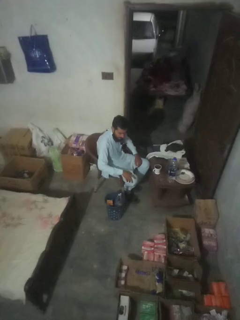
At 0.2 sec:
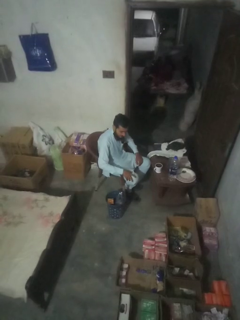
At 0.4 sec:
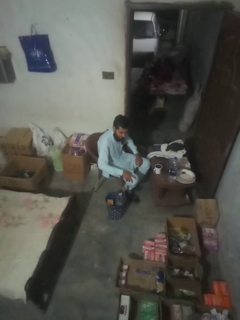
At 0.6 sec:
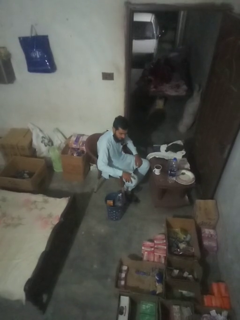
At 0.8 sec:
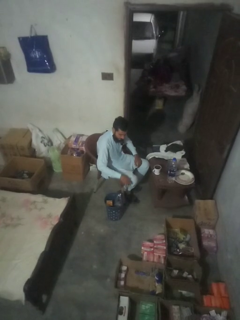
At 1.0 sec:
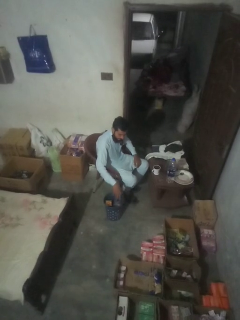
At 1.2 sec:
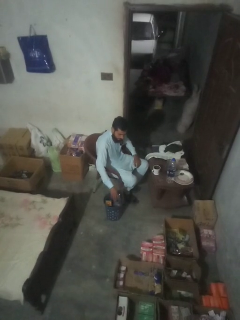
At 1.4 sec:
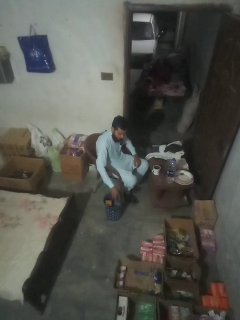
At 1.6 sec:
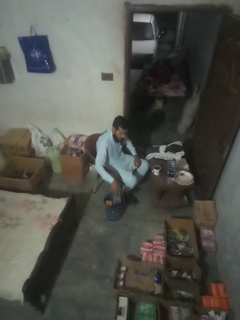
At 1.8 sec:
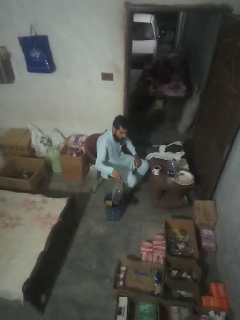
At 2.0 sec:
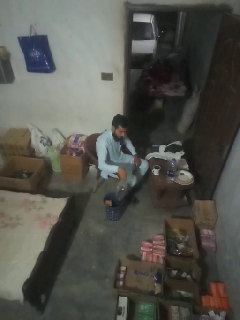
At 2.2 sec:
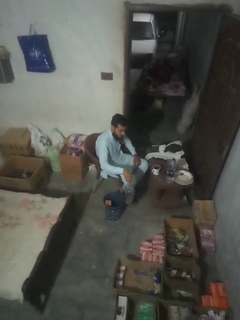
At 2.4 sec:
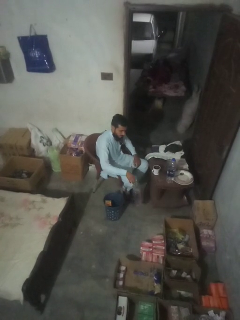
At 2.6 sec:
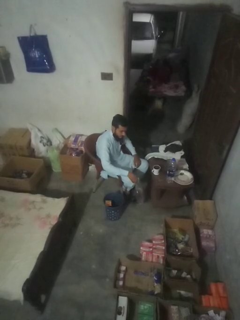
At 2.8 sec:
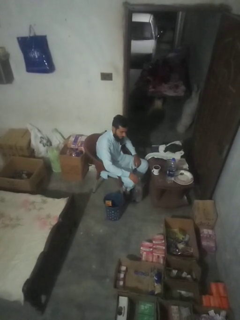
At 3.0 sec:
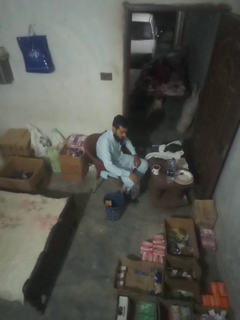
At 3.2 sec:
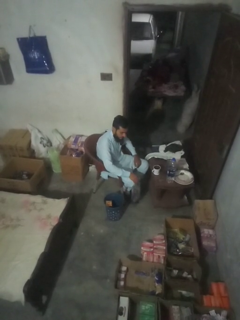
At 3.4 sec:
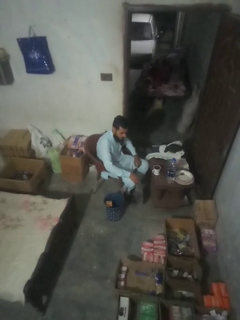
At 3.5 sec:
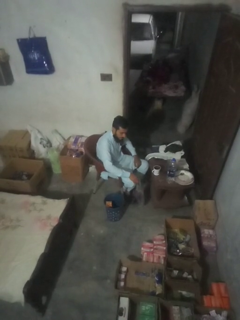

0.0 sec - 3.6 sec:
person inserts trashbag into trashcan

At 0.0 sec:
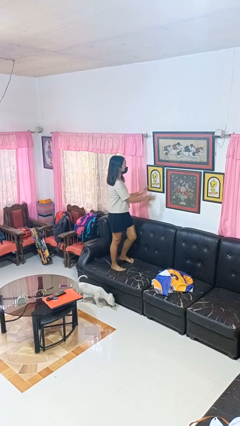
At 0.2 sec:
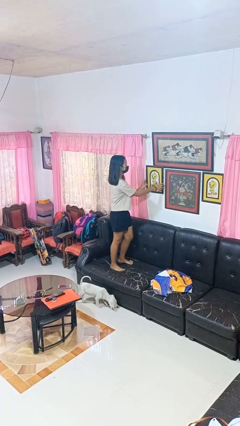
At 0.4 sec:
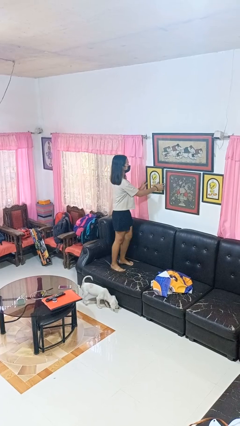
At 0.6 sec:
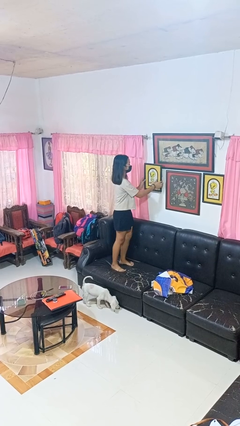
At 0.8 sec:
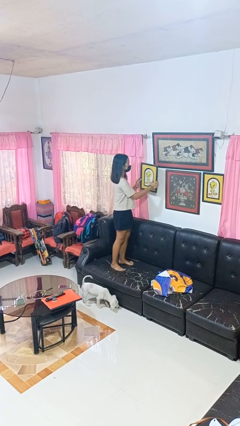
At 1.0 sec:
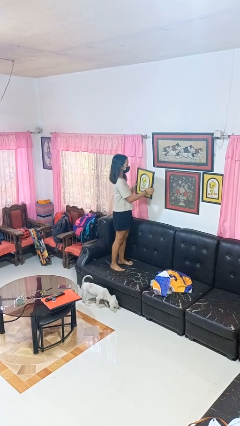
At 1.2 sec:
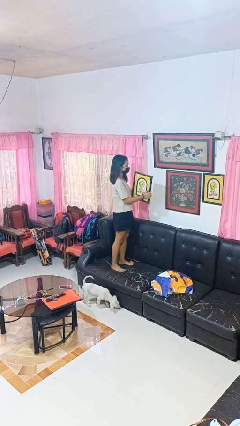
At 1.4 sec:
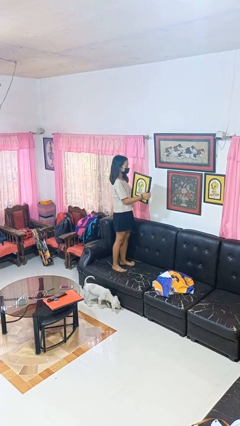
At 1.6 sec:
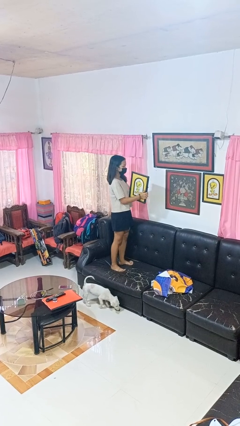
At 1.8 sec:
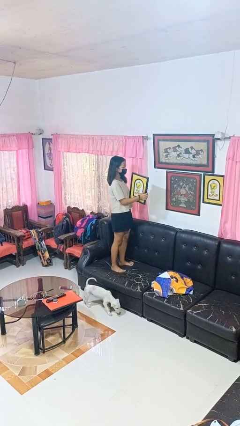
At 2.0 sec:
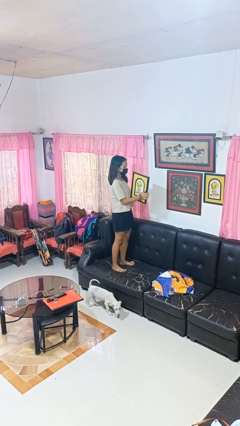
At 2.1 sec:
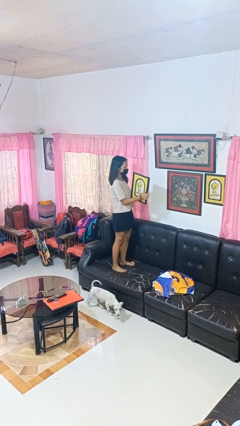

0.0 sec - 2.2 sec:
person takes down picture frame

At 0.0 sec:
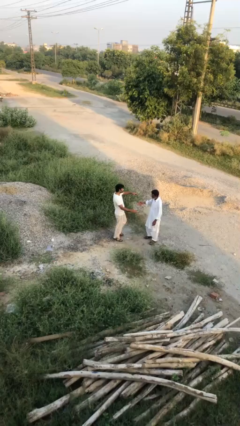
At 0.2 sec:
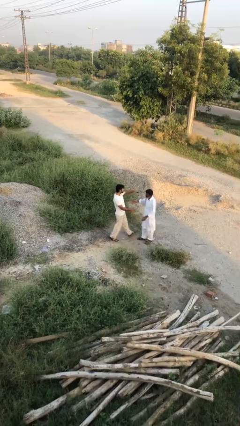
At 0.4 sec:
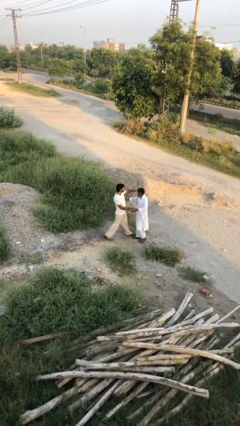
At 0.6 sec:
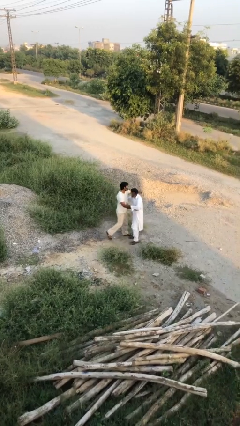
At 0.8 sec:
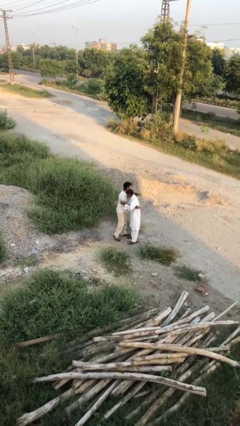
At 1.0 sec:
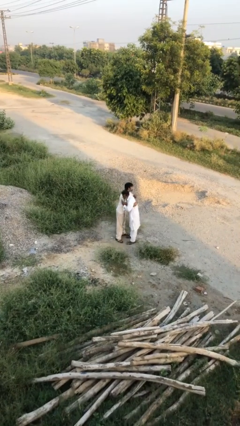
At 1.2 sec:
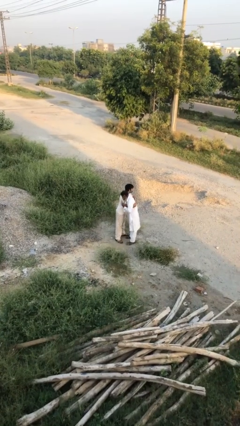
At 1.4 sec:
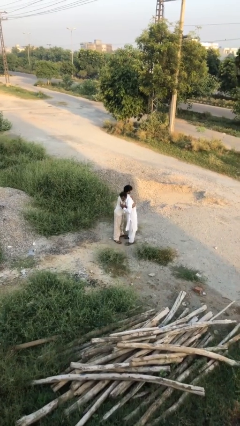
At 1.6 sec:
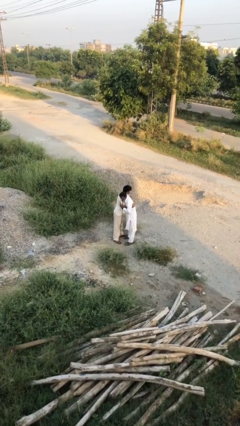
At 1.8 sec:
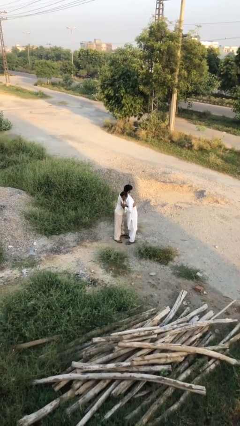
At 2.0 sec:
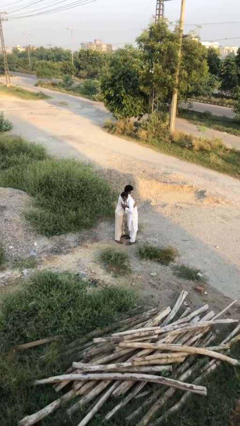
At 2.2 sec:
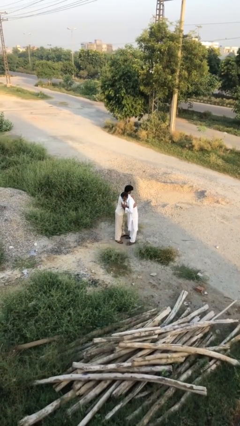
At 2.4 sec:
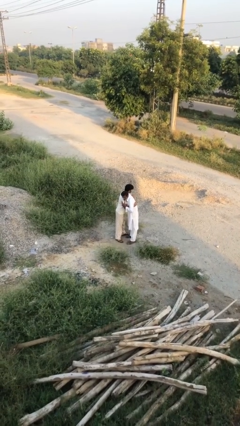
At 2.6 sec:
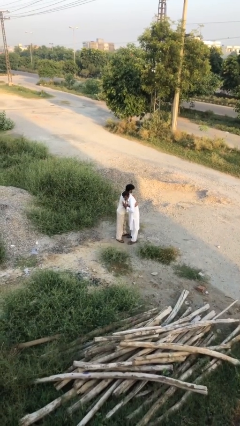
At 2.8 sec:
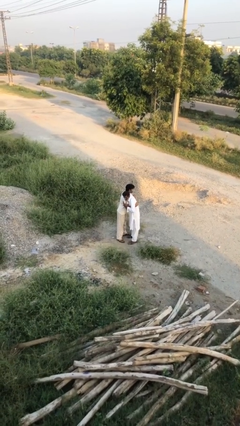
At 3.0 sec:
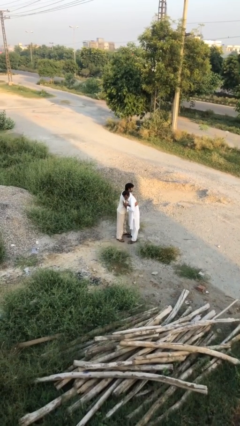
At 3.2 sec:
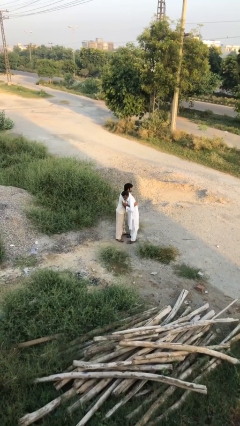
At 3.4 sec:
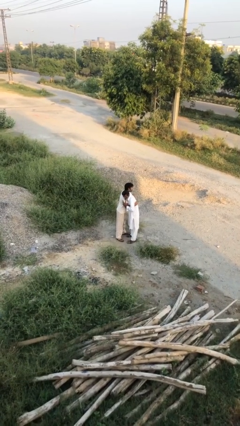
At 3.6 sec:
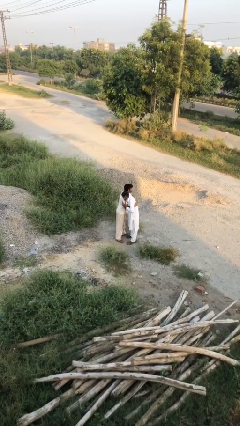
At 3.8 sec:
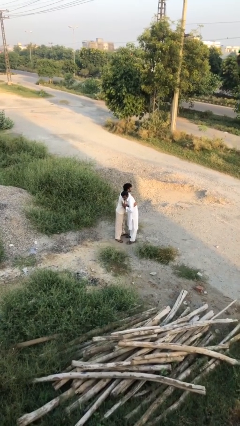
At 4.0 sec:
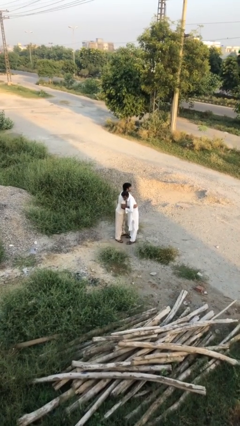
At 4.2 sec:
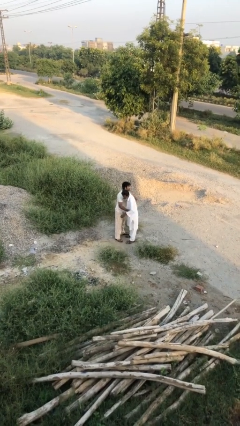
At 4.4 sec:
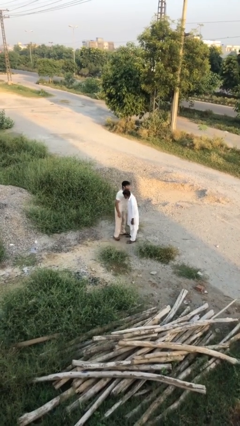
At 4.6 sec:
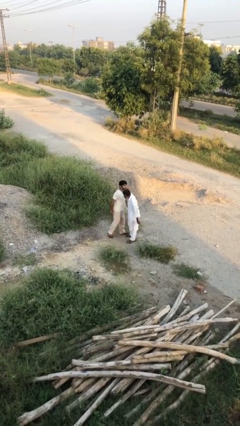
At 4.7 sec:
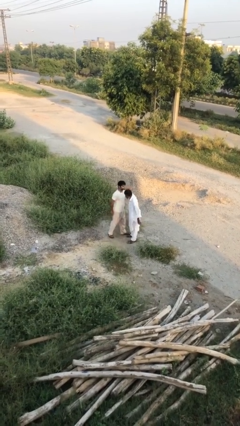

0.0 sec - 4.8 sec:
person embraces person

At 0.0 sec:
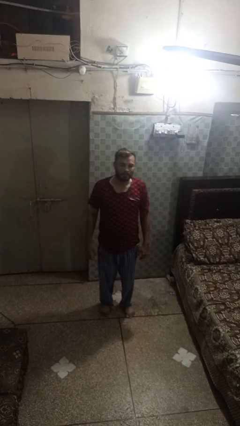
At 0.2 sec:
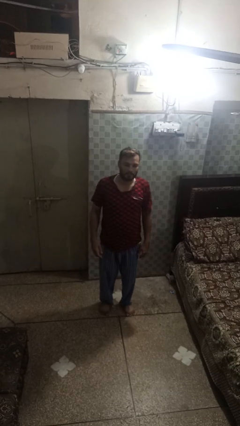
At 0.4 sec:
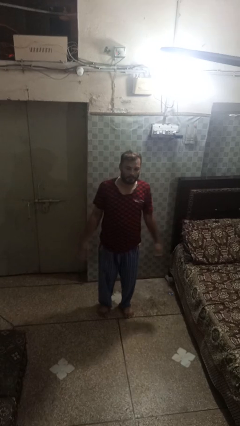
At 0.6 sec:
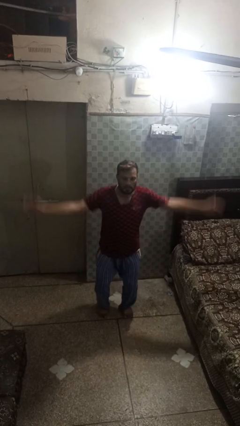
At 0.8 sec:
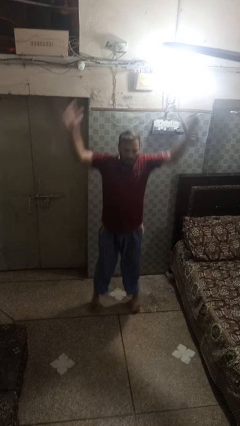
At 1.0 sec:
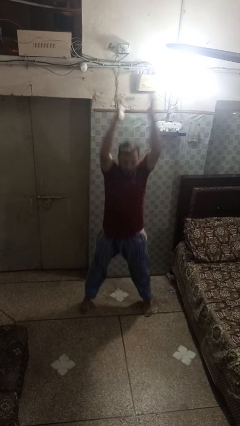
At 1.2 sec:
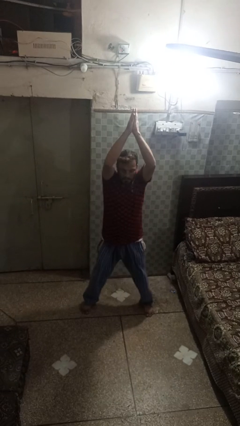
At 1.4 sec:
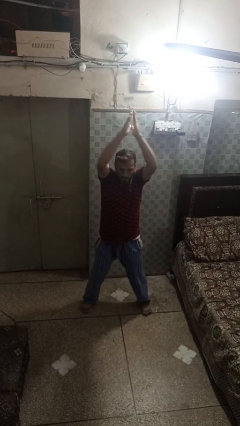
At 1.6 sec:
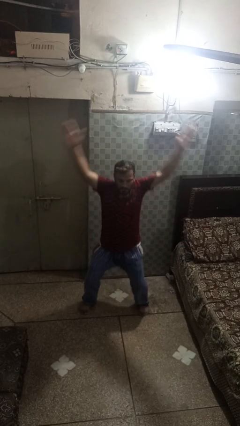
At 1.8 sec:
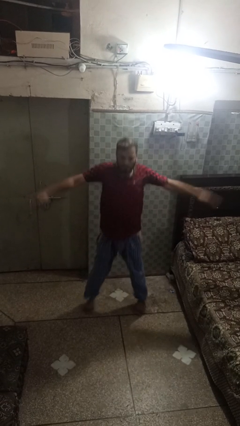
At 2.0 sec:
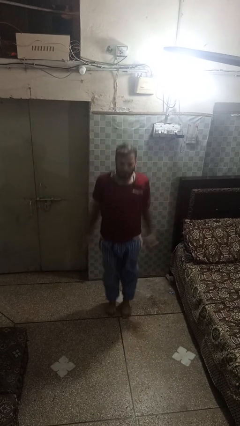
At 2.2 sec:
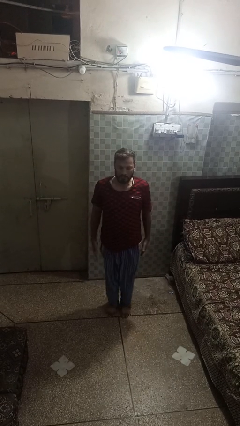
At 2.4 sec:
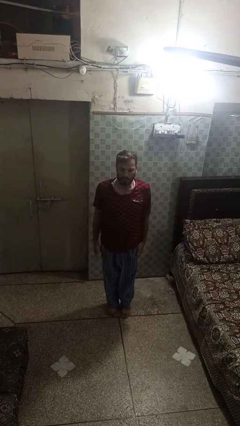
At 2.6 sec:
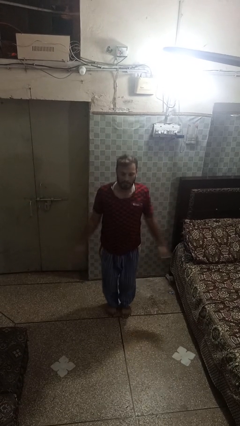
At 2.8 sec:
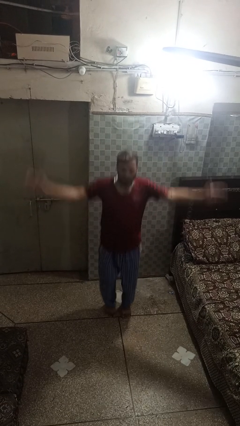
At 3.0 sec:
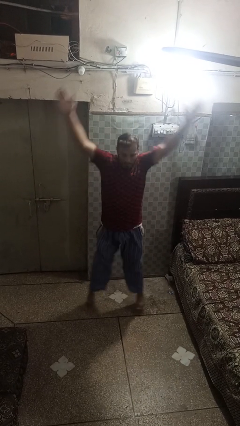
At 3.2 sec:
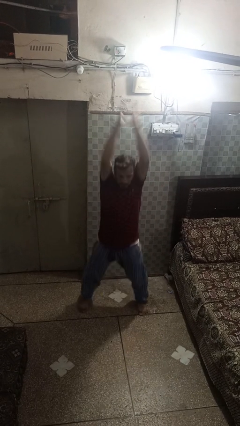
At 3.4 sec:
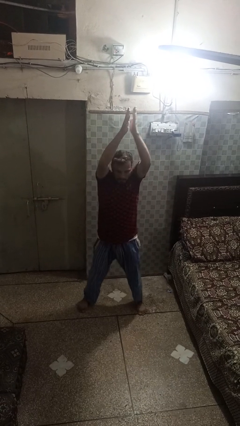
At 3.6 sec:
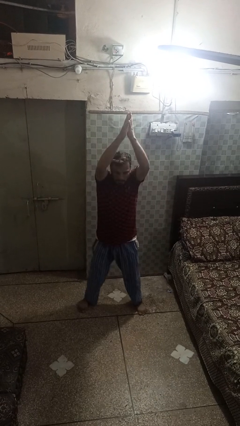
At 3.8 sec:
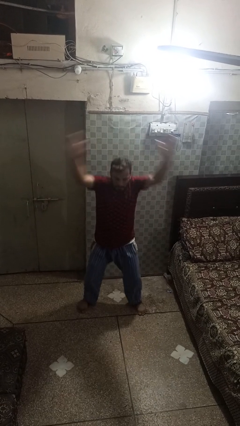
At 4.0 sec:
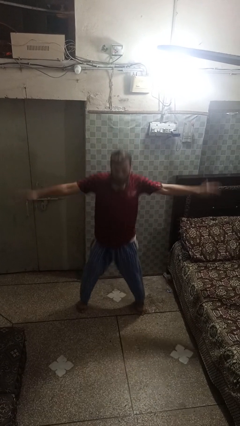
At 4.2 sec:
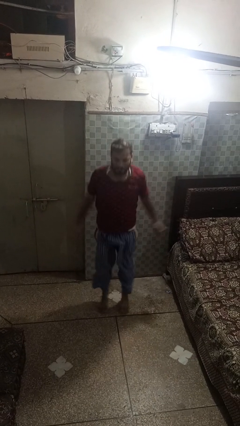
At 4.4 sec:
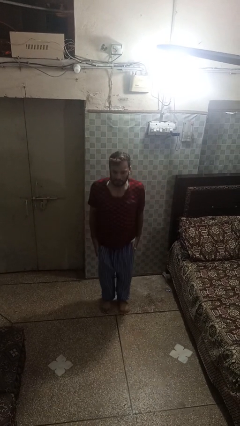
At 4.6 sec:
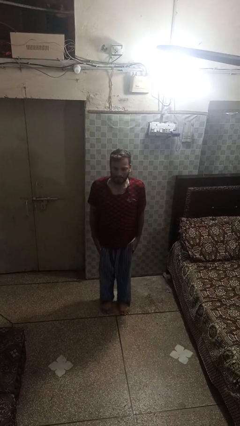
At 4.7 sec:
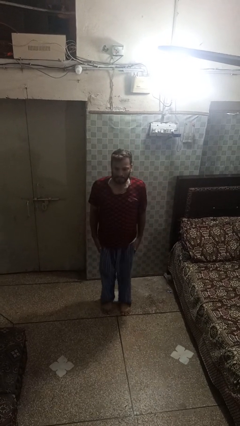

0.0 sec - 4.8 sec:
person exercises with jumping jacks

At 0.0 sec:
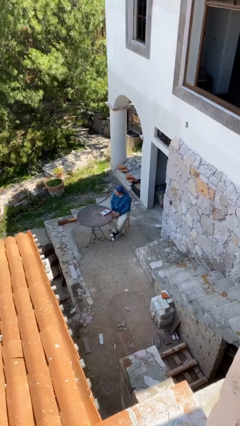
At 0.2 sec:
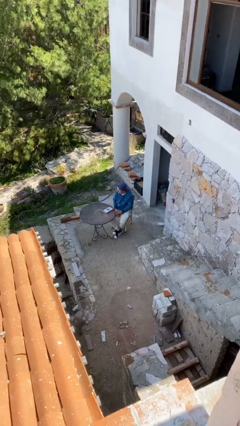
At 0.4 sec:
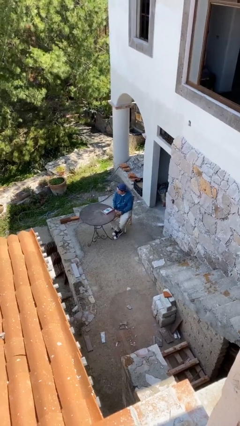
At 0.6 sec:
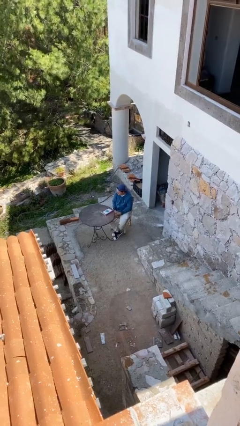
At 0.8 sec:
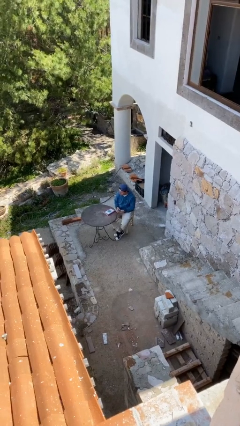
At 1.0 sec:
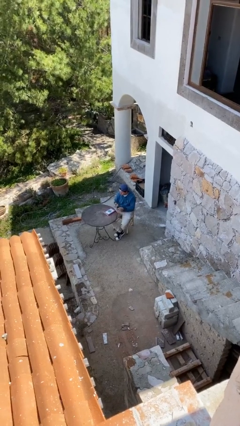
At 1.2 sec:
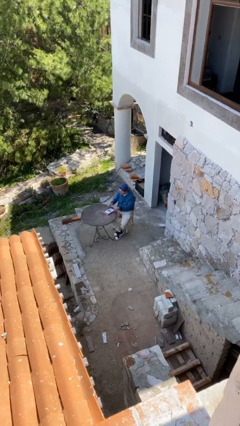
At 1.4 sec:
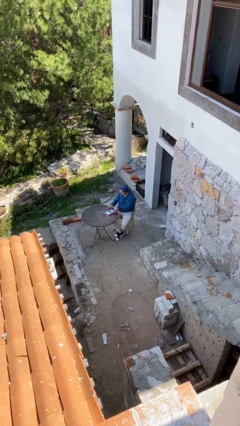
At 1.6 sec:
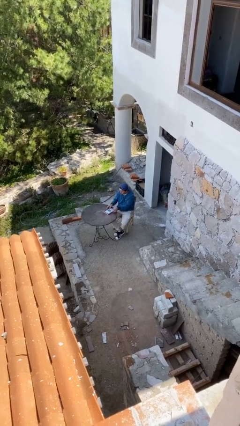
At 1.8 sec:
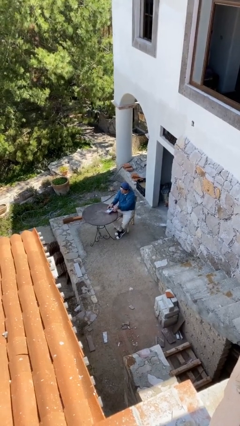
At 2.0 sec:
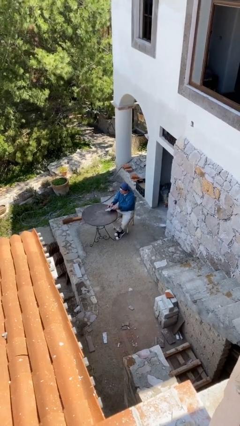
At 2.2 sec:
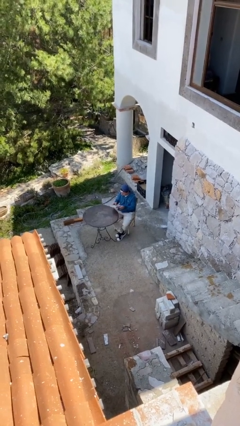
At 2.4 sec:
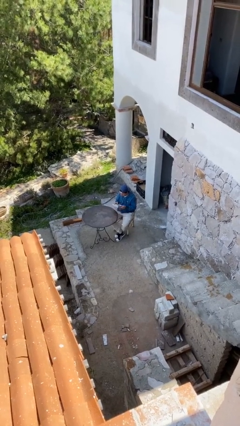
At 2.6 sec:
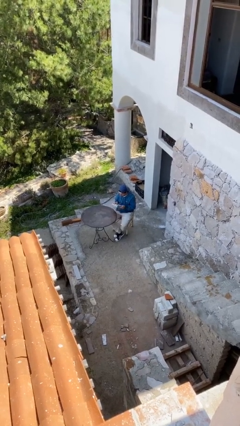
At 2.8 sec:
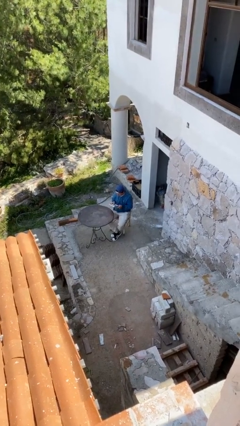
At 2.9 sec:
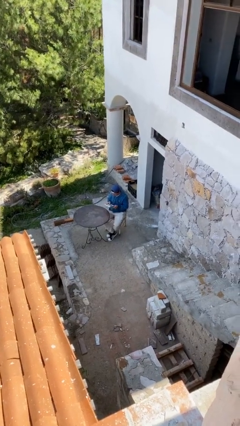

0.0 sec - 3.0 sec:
person picks up object from table
